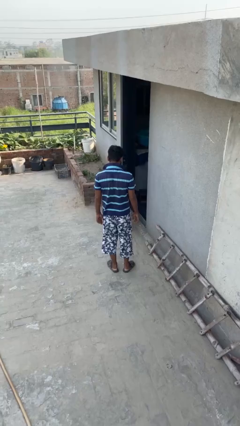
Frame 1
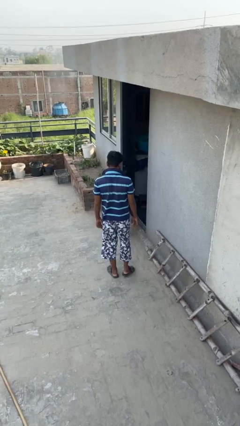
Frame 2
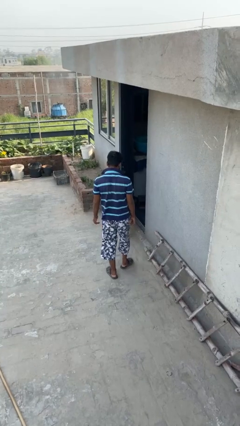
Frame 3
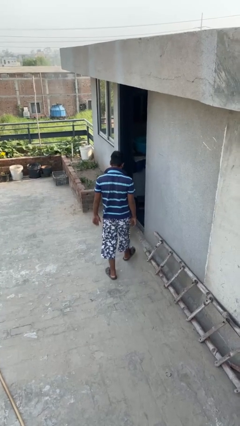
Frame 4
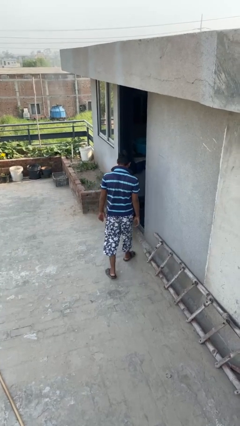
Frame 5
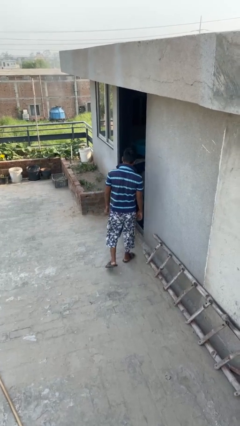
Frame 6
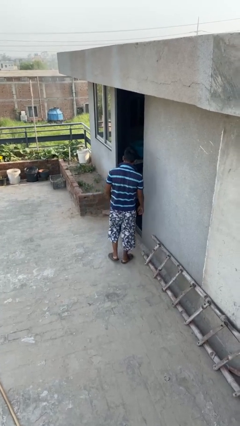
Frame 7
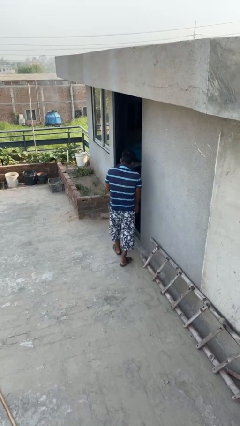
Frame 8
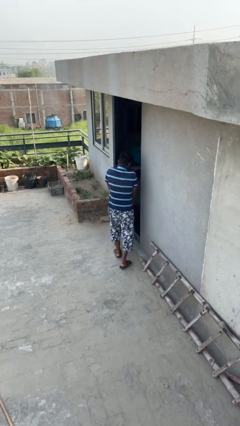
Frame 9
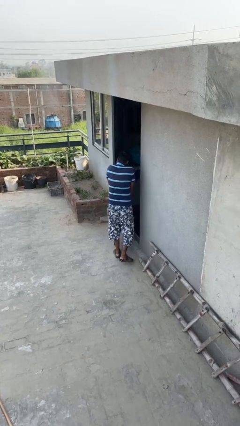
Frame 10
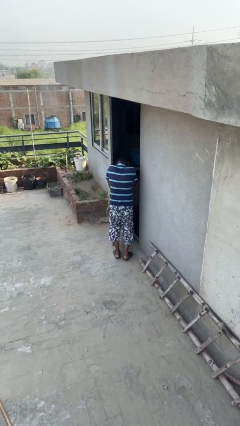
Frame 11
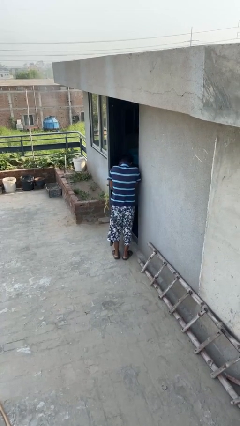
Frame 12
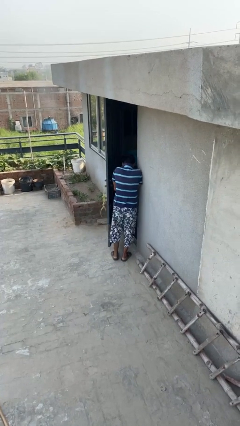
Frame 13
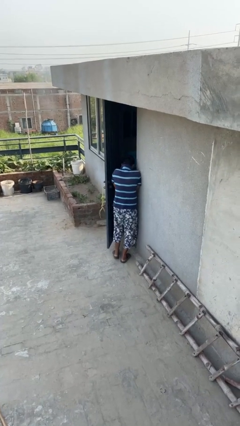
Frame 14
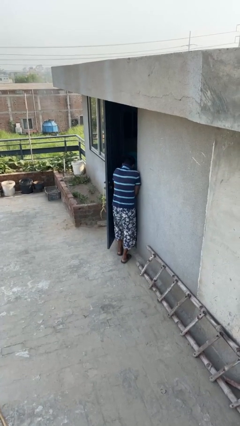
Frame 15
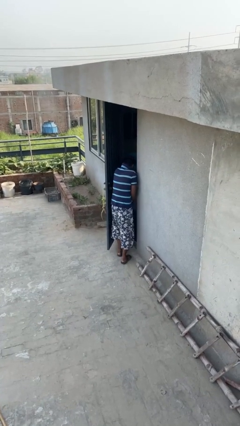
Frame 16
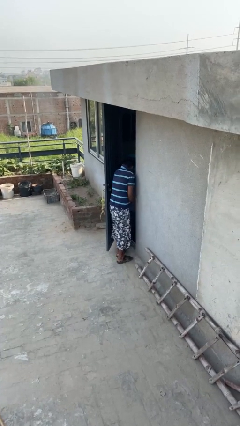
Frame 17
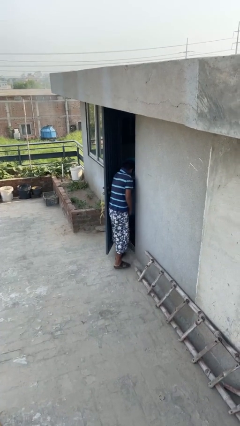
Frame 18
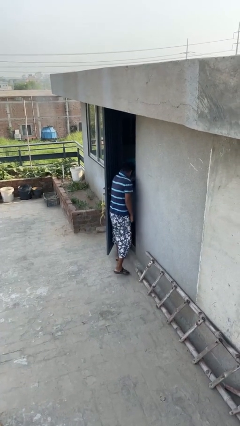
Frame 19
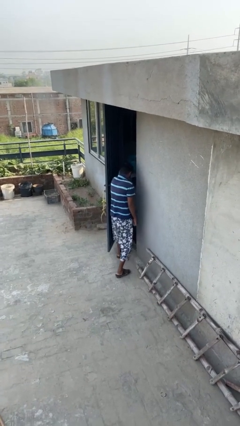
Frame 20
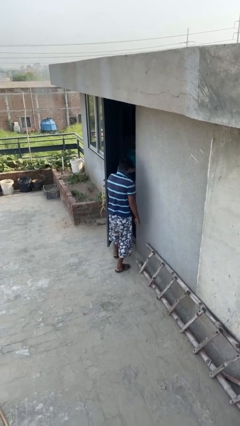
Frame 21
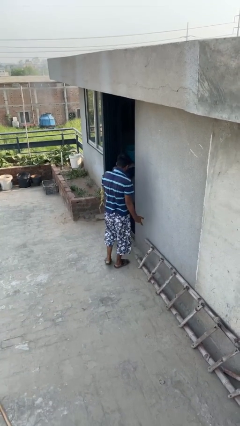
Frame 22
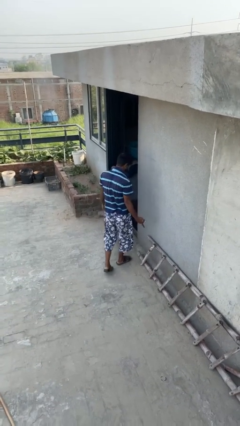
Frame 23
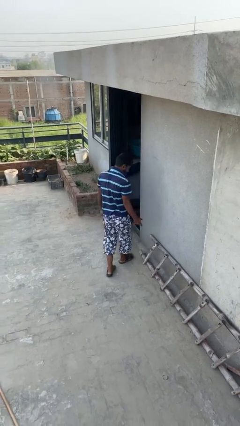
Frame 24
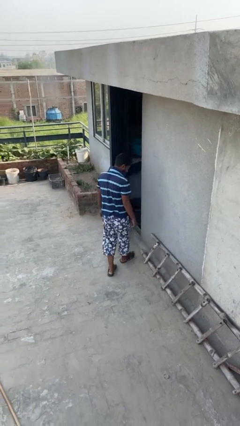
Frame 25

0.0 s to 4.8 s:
person bumps into wall

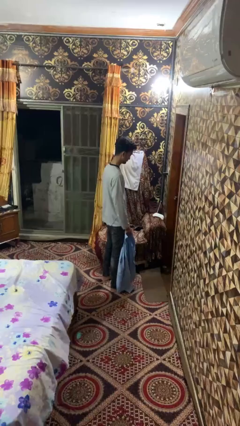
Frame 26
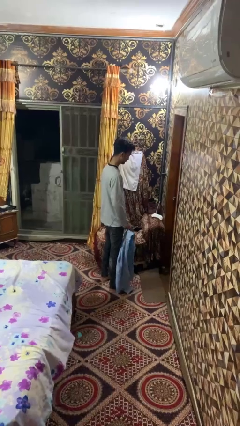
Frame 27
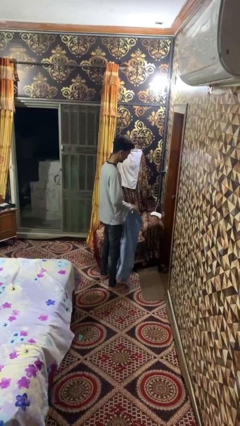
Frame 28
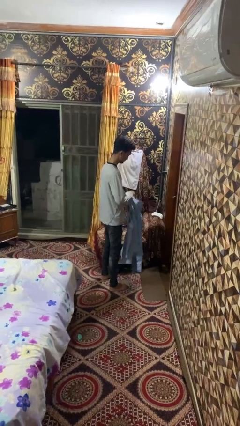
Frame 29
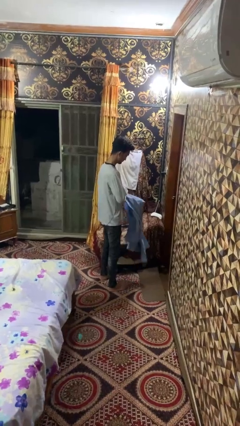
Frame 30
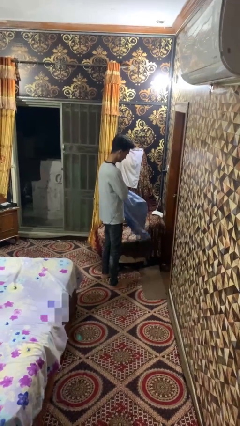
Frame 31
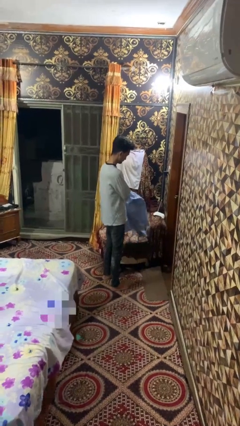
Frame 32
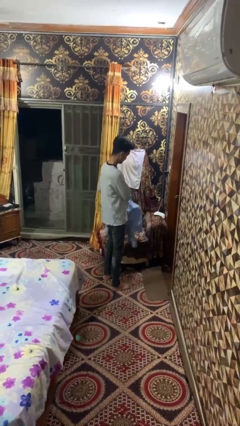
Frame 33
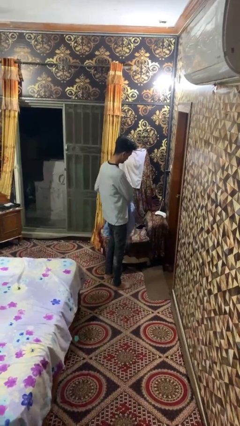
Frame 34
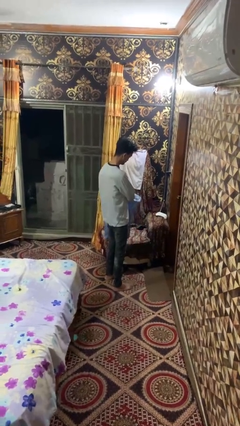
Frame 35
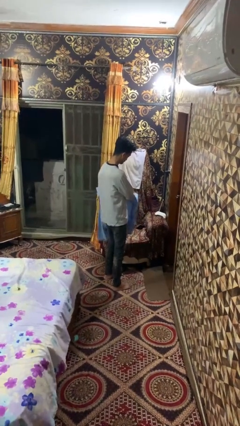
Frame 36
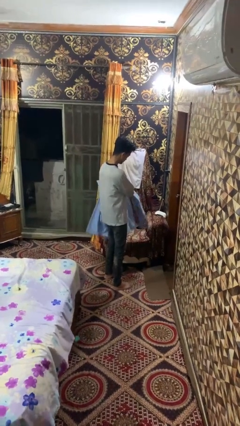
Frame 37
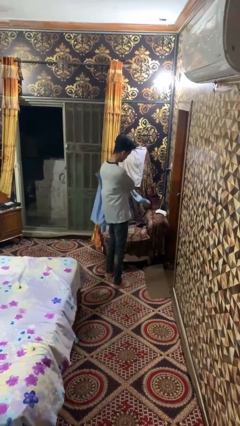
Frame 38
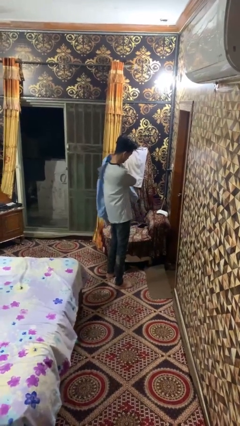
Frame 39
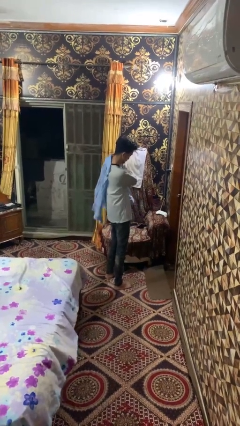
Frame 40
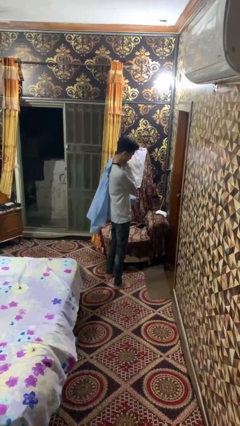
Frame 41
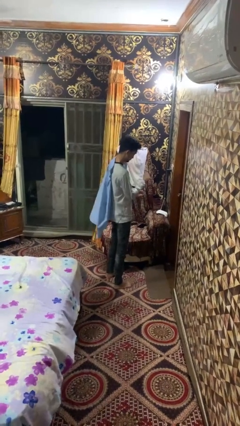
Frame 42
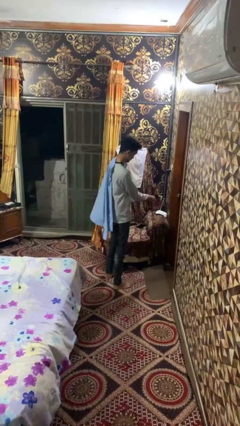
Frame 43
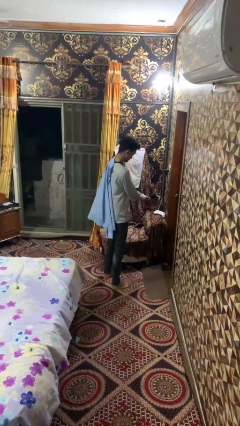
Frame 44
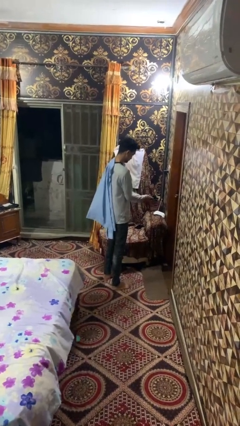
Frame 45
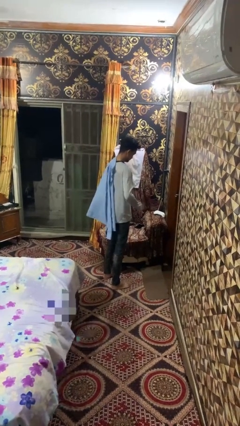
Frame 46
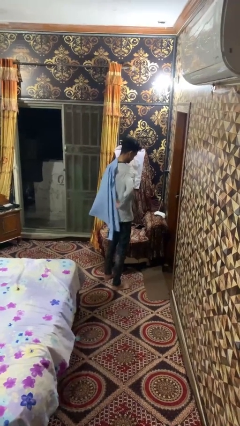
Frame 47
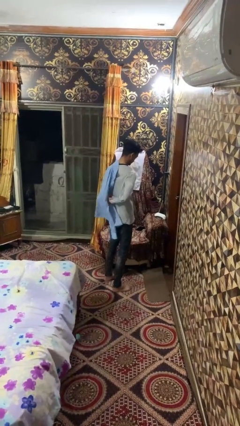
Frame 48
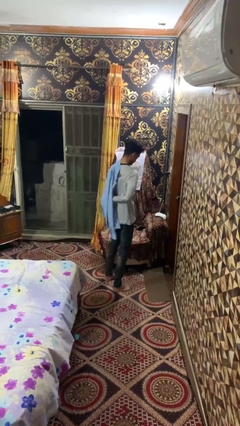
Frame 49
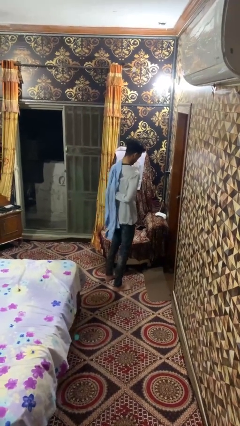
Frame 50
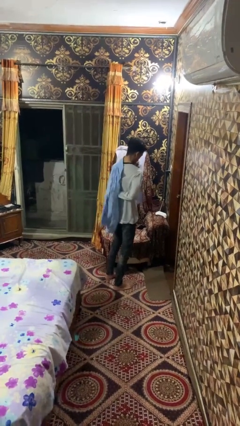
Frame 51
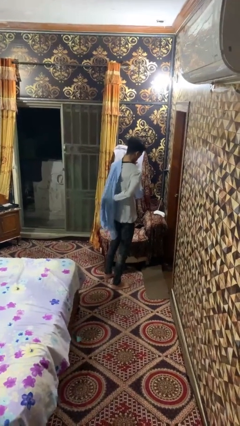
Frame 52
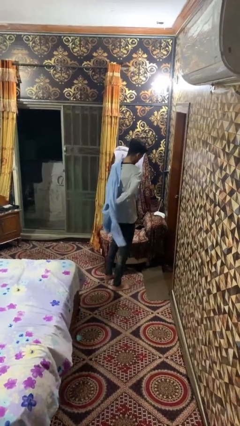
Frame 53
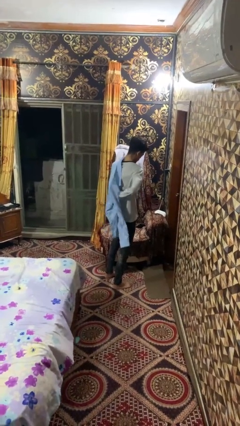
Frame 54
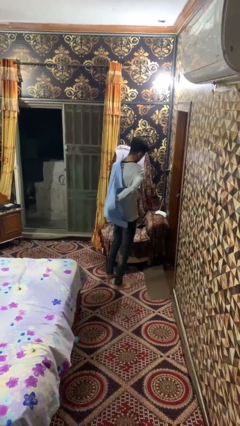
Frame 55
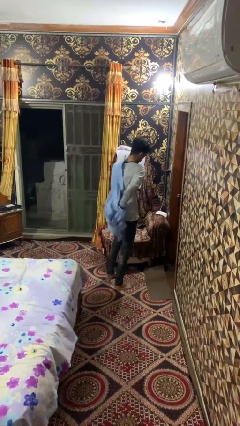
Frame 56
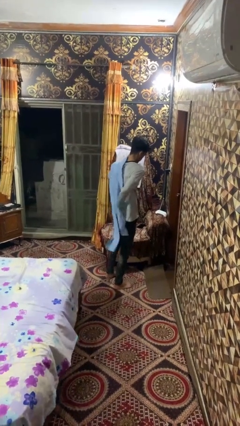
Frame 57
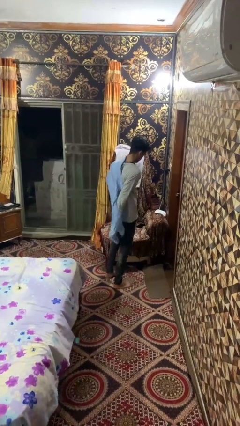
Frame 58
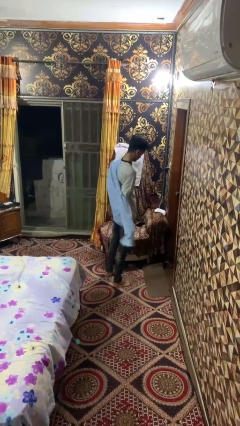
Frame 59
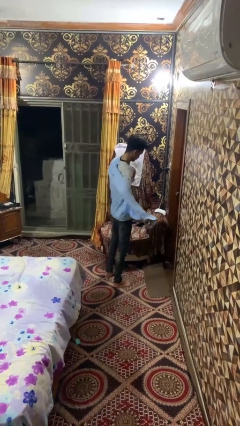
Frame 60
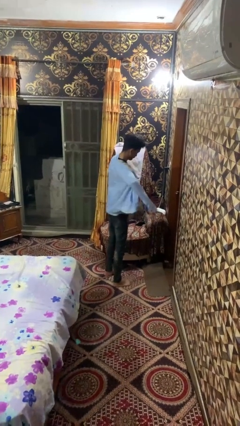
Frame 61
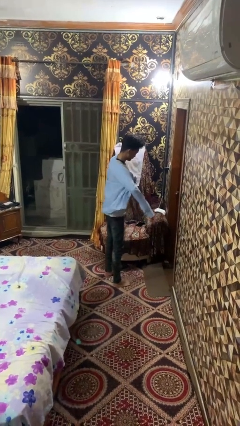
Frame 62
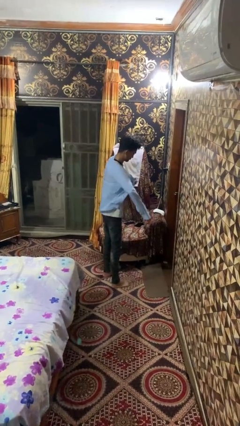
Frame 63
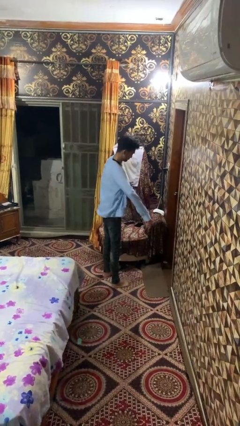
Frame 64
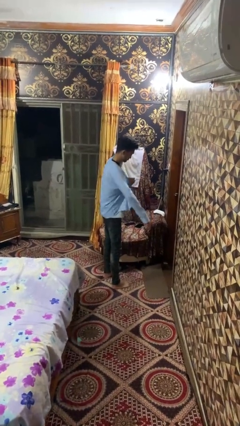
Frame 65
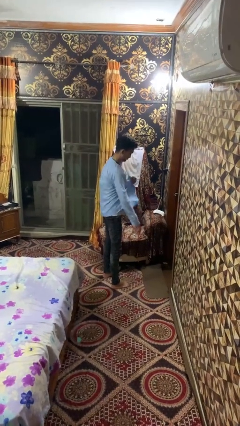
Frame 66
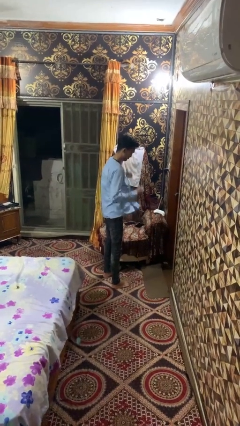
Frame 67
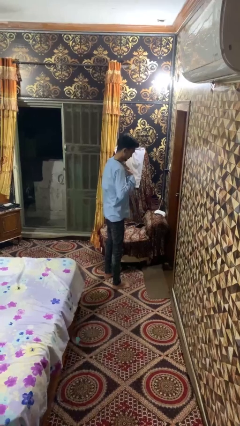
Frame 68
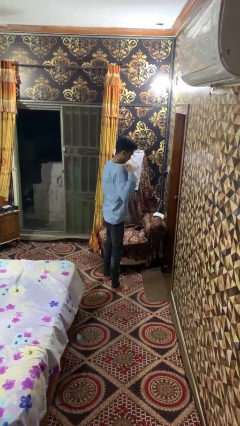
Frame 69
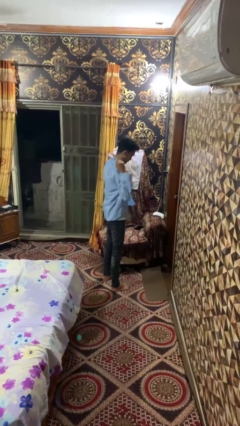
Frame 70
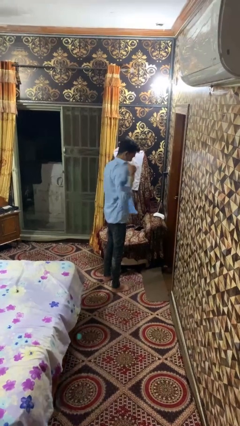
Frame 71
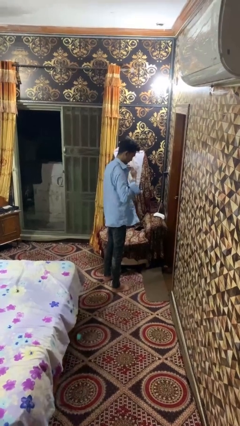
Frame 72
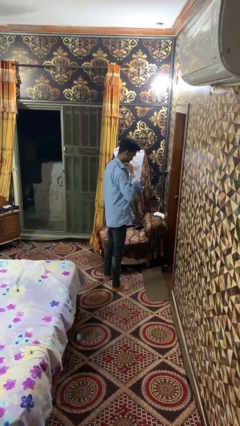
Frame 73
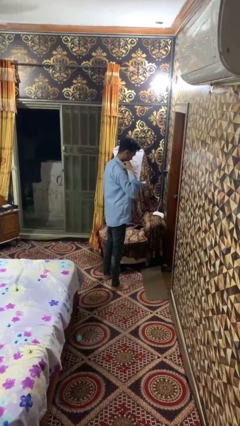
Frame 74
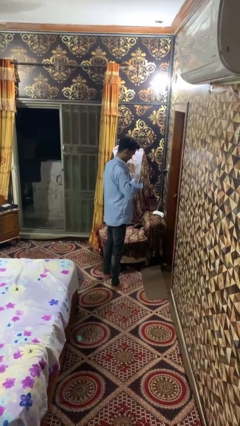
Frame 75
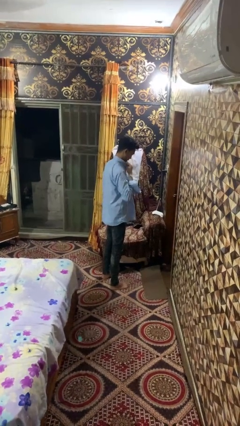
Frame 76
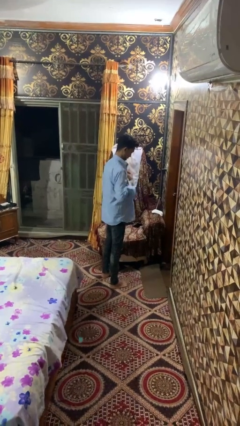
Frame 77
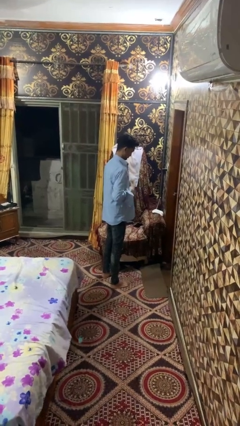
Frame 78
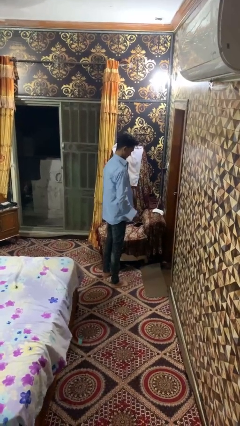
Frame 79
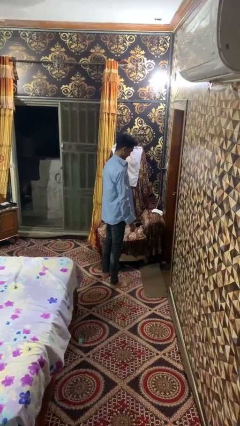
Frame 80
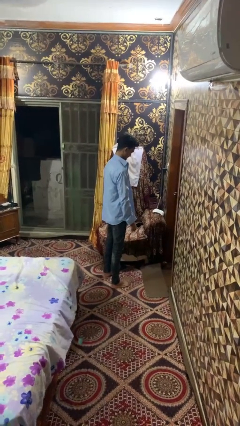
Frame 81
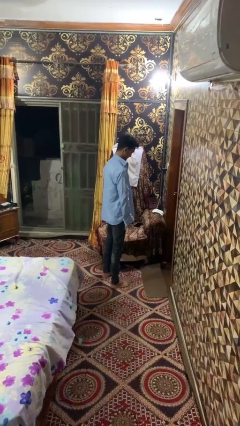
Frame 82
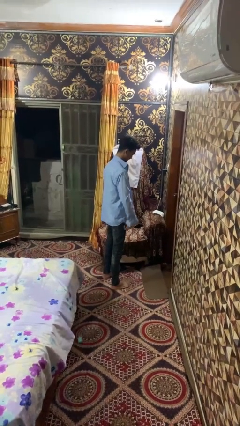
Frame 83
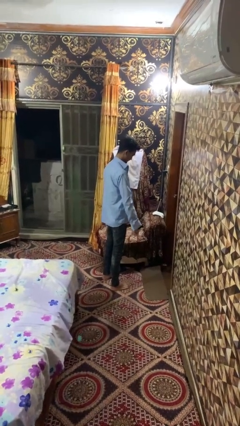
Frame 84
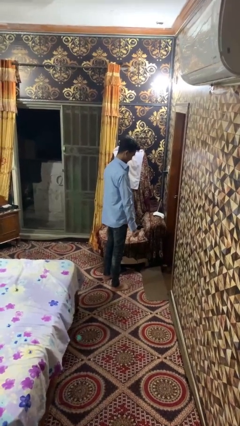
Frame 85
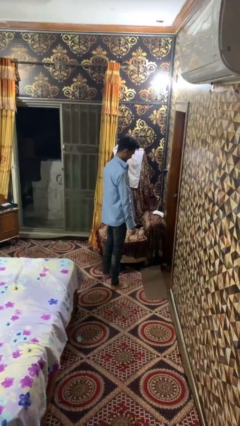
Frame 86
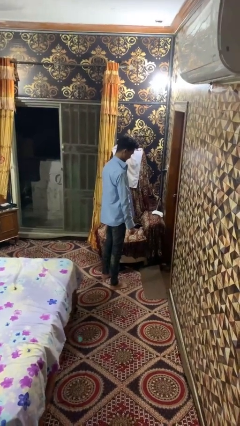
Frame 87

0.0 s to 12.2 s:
person puts on shirt

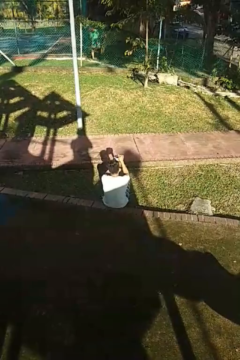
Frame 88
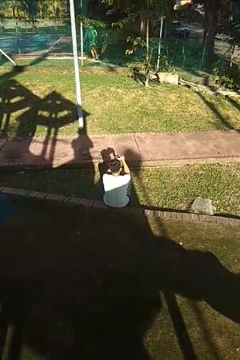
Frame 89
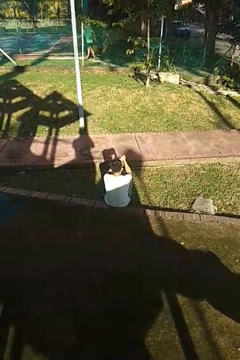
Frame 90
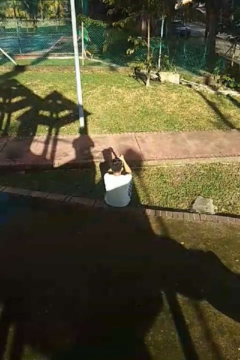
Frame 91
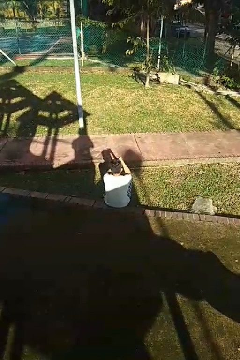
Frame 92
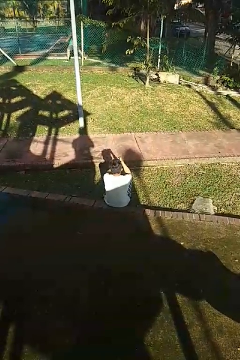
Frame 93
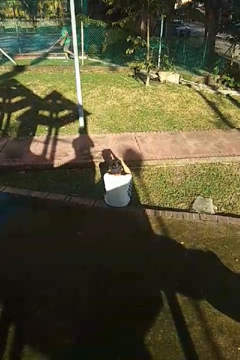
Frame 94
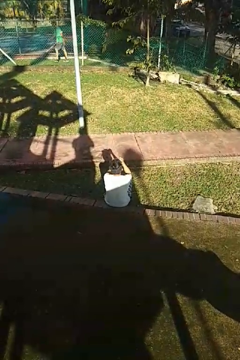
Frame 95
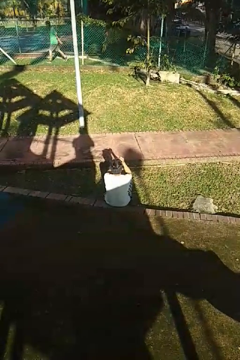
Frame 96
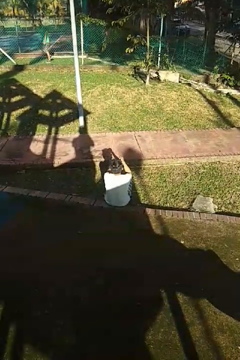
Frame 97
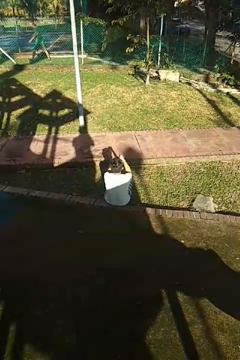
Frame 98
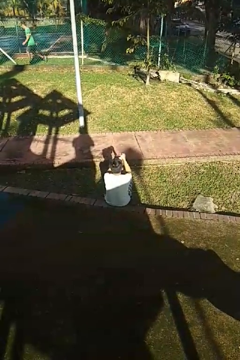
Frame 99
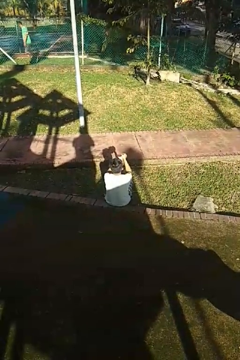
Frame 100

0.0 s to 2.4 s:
person drinks from mug
